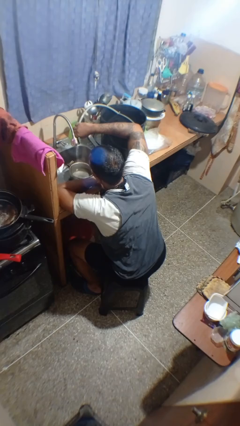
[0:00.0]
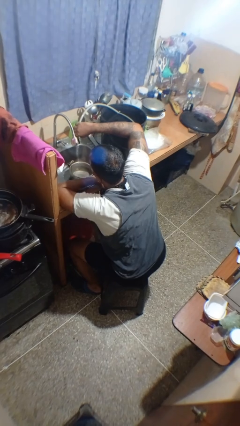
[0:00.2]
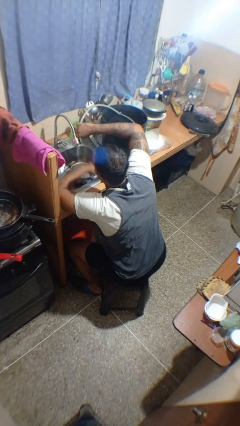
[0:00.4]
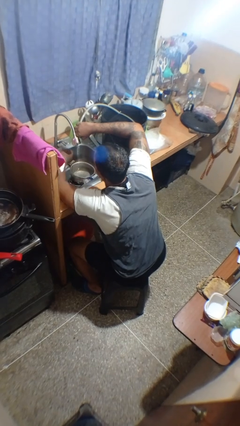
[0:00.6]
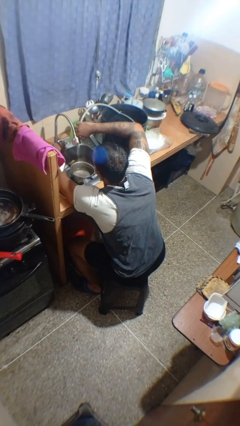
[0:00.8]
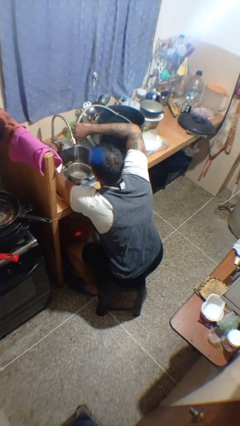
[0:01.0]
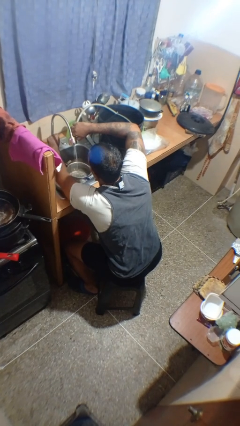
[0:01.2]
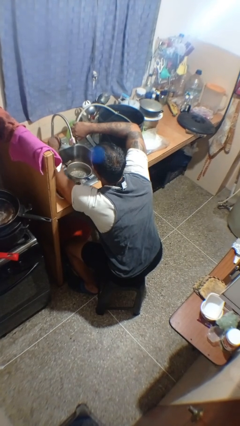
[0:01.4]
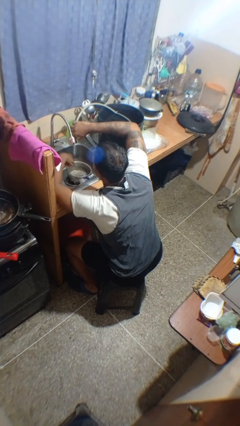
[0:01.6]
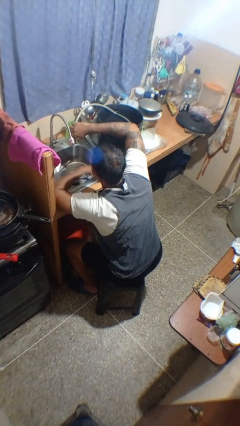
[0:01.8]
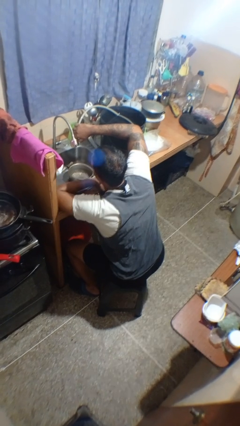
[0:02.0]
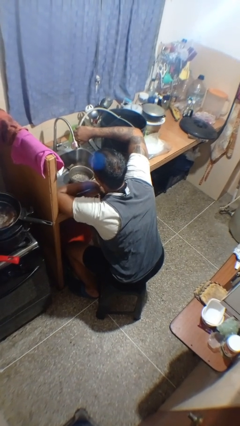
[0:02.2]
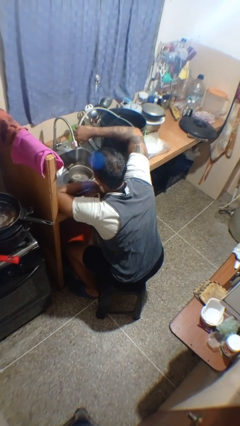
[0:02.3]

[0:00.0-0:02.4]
person turns off faucet

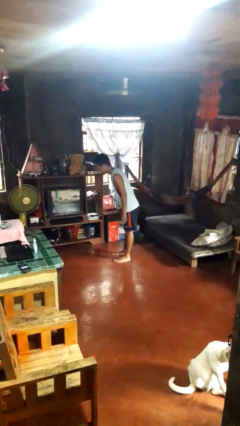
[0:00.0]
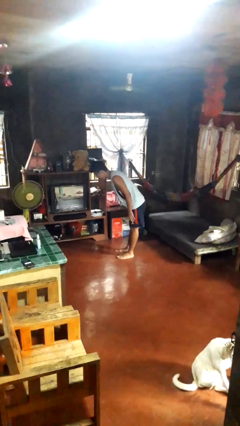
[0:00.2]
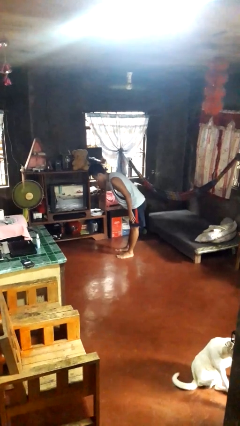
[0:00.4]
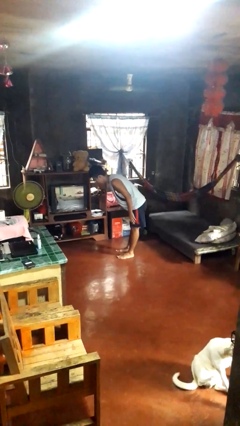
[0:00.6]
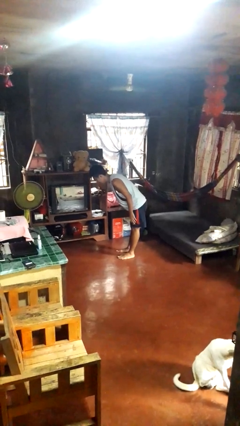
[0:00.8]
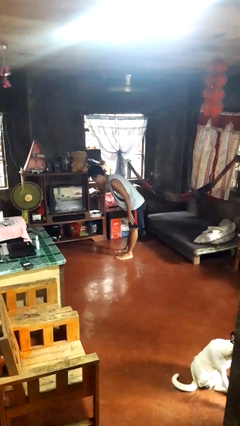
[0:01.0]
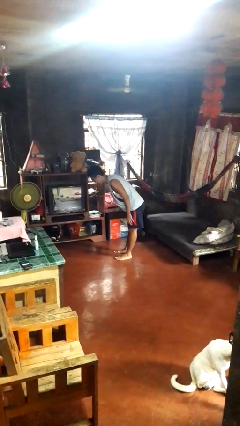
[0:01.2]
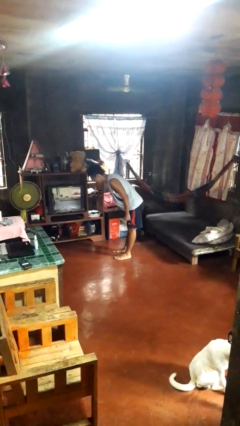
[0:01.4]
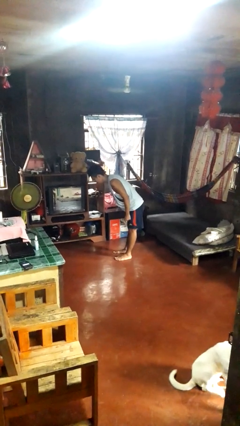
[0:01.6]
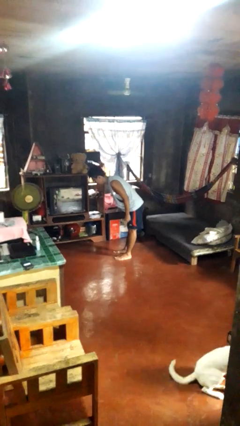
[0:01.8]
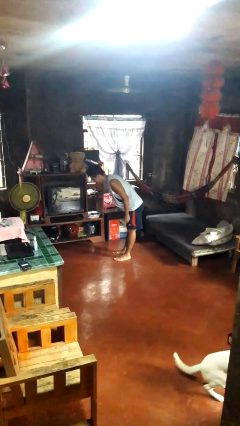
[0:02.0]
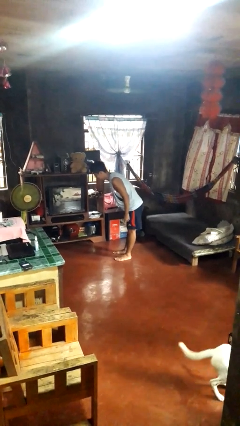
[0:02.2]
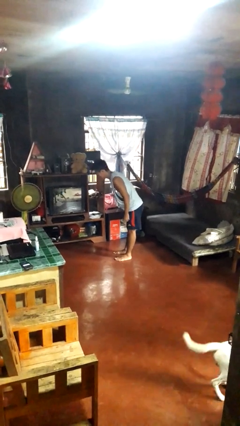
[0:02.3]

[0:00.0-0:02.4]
person bows

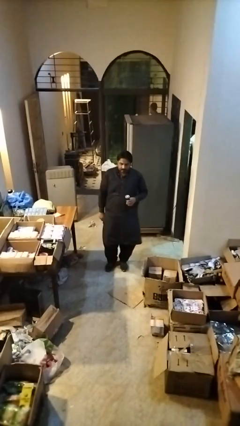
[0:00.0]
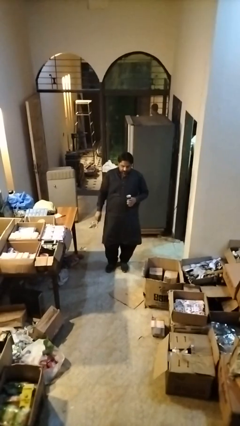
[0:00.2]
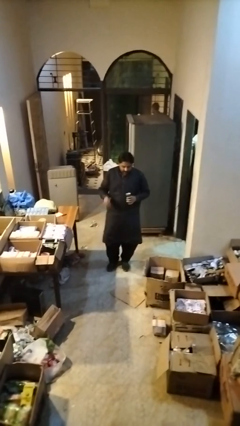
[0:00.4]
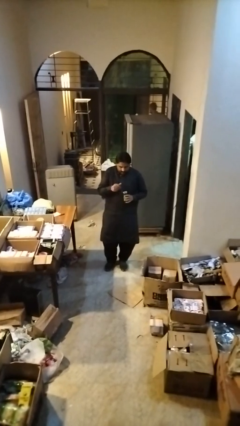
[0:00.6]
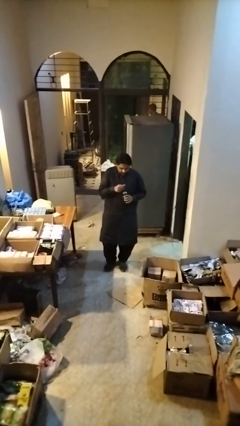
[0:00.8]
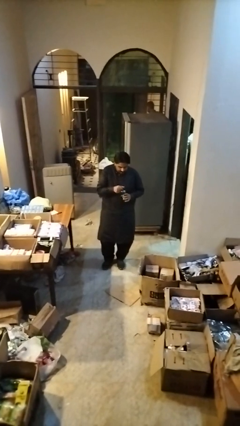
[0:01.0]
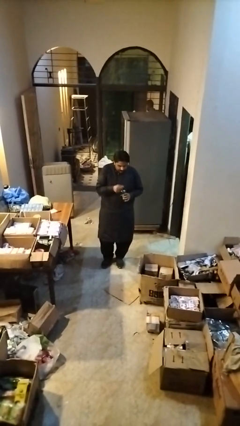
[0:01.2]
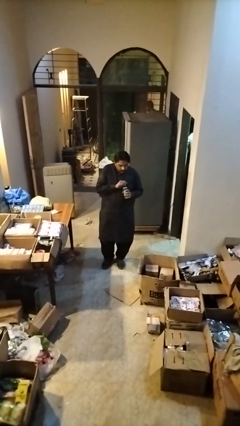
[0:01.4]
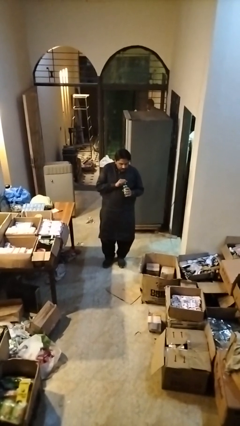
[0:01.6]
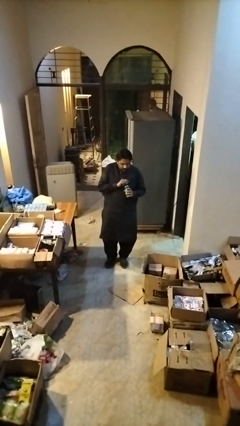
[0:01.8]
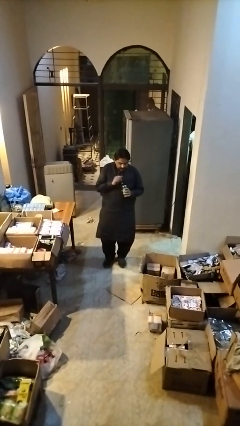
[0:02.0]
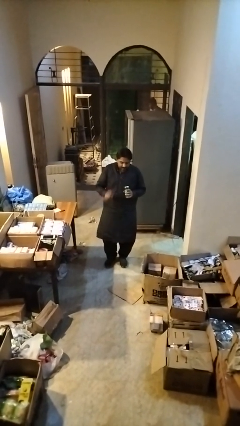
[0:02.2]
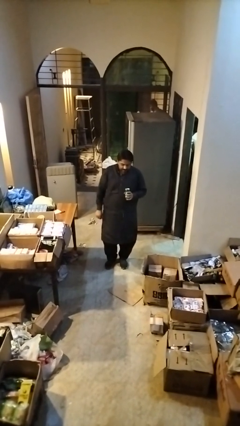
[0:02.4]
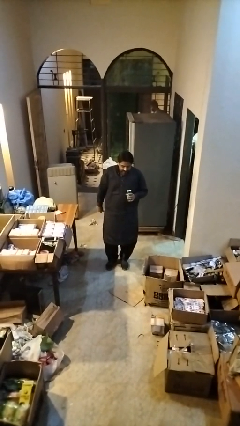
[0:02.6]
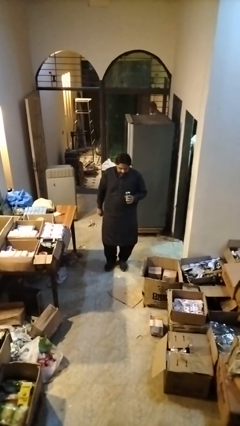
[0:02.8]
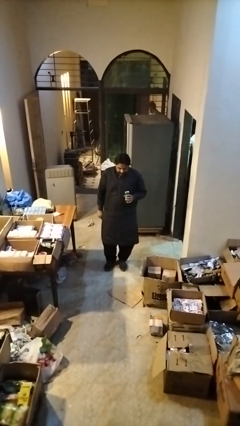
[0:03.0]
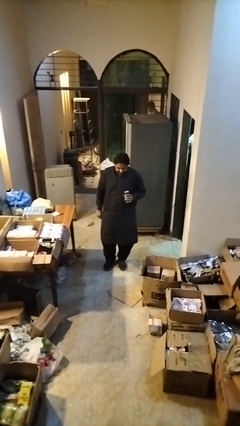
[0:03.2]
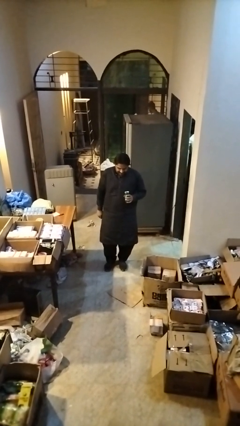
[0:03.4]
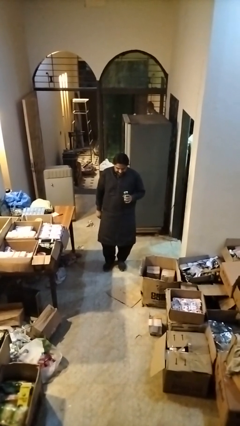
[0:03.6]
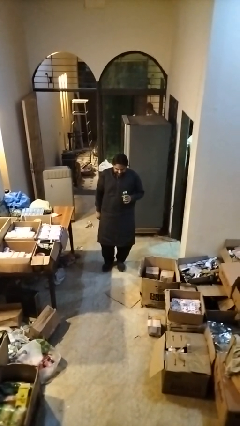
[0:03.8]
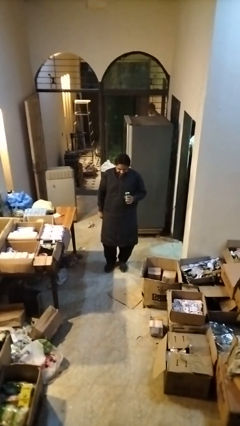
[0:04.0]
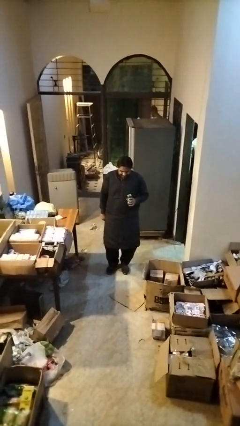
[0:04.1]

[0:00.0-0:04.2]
person opens can with can opener

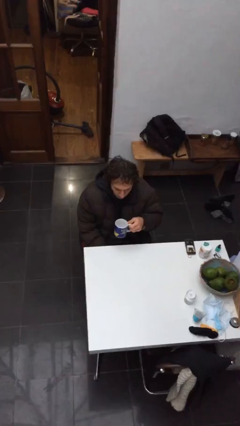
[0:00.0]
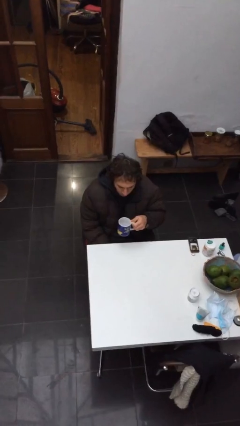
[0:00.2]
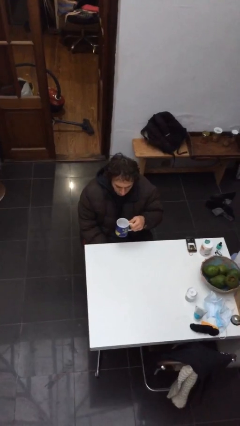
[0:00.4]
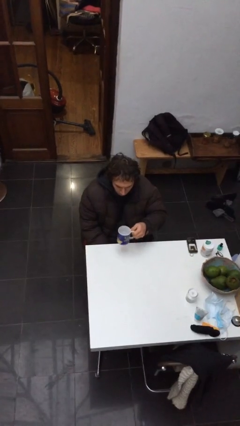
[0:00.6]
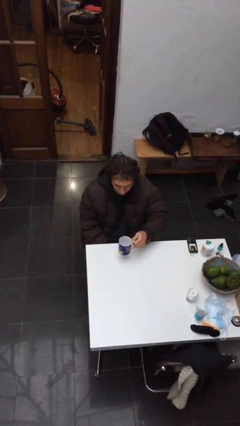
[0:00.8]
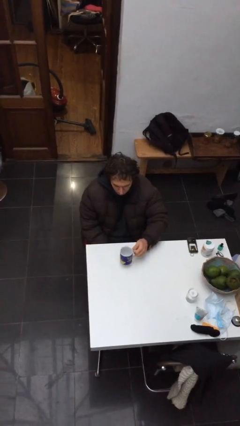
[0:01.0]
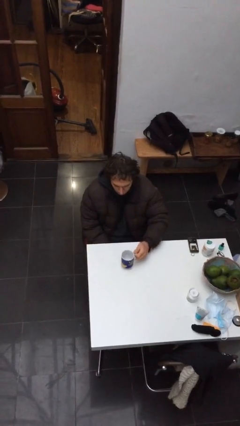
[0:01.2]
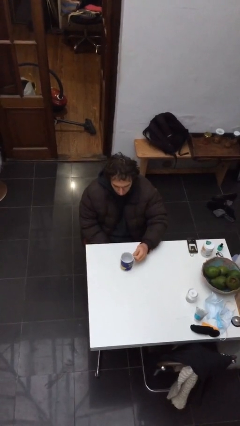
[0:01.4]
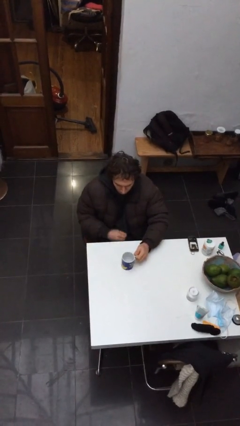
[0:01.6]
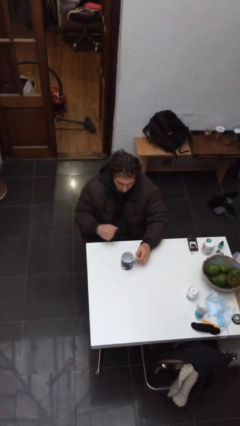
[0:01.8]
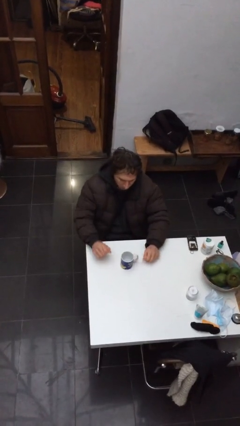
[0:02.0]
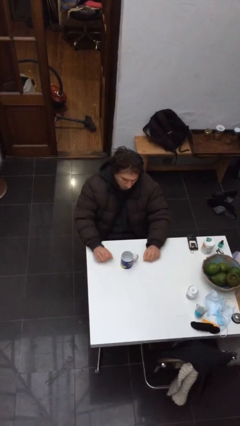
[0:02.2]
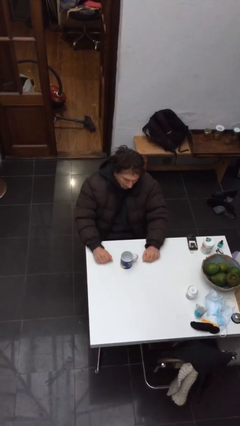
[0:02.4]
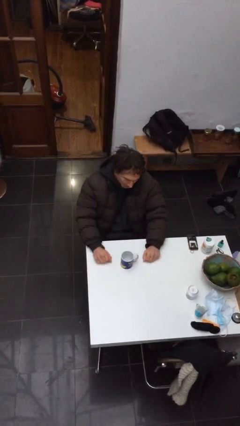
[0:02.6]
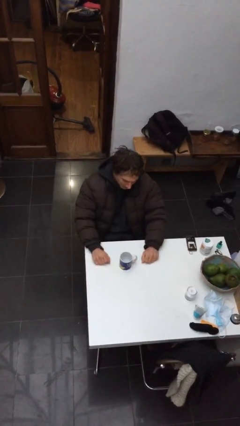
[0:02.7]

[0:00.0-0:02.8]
person puts down object on table

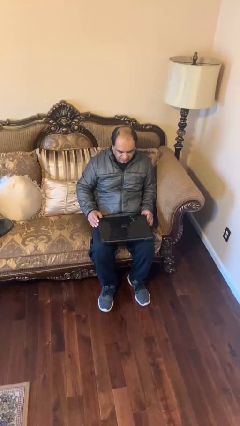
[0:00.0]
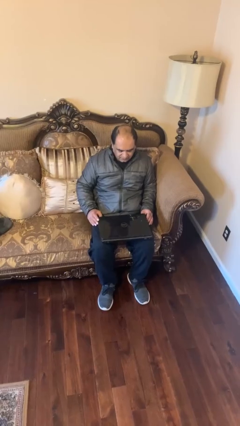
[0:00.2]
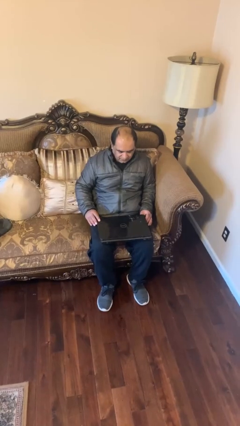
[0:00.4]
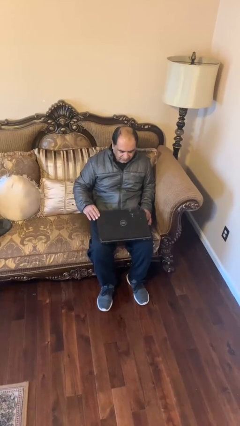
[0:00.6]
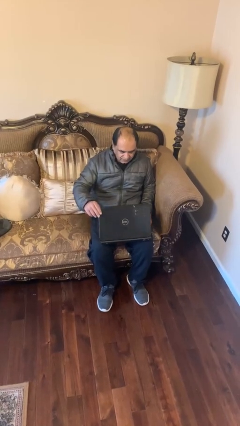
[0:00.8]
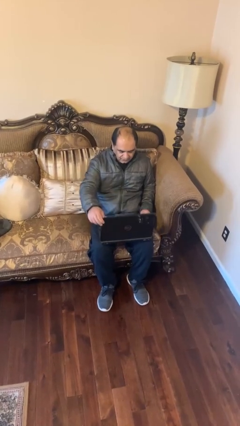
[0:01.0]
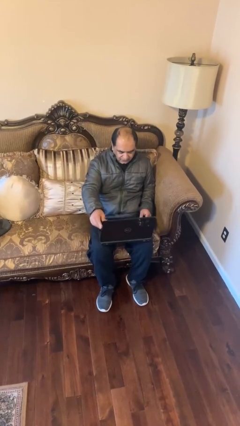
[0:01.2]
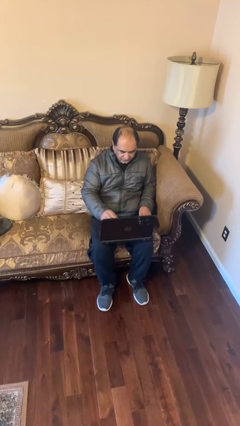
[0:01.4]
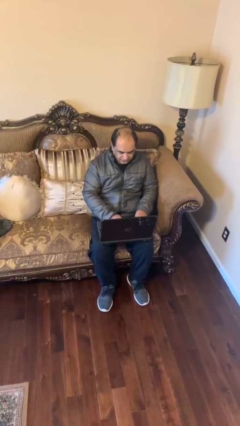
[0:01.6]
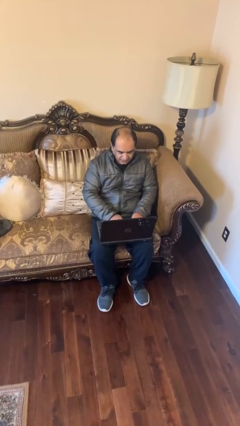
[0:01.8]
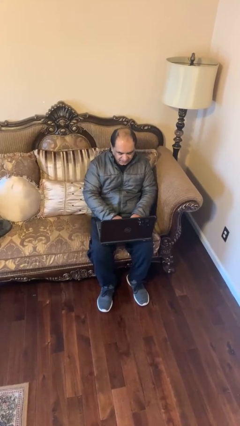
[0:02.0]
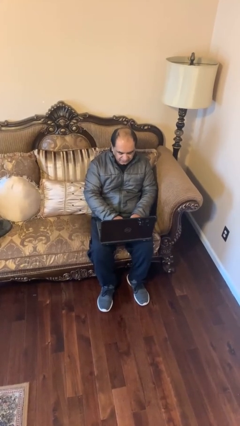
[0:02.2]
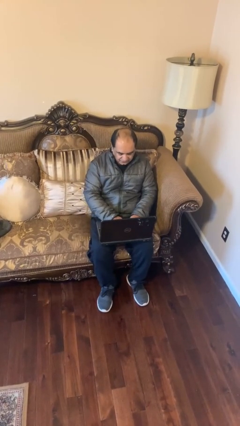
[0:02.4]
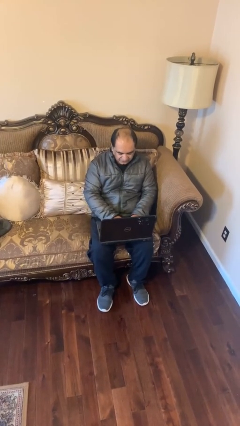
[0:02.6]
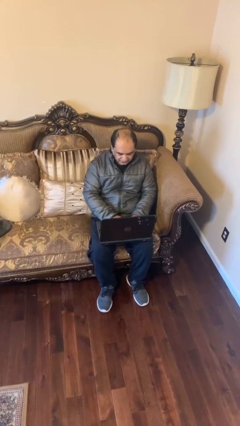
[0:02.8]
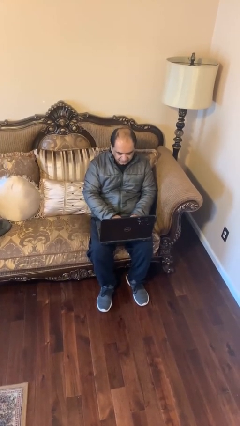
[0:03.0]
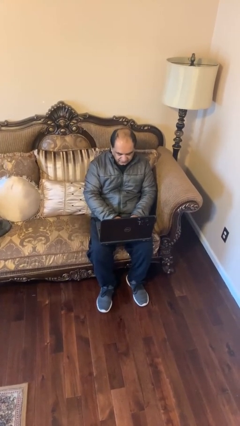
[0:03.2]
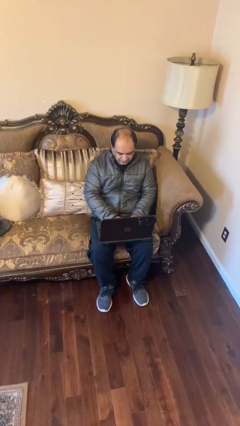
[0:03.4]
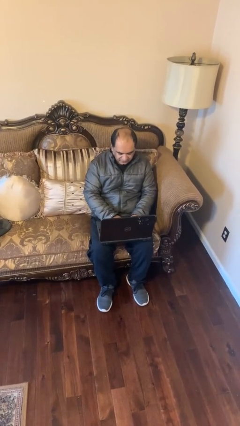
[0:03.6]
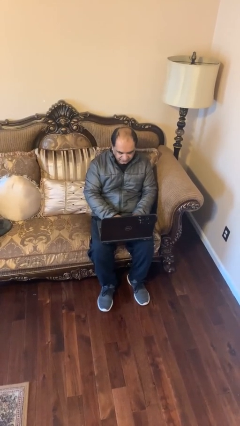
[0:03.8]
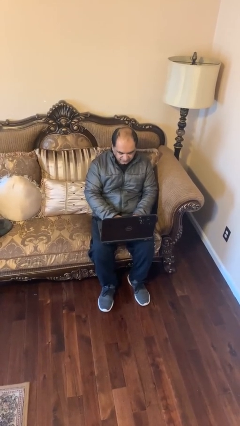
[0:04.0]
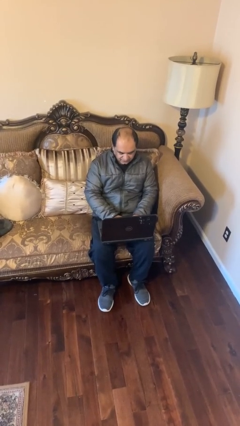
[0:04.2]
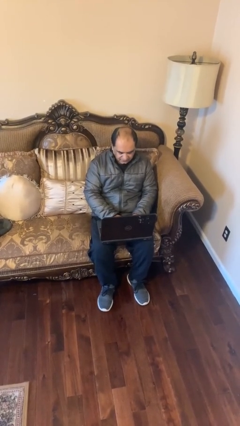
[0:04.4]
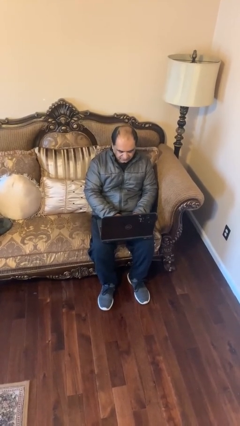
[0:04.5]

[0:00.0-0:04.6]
person interacts with laptop

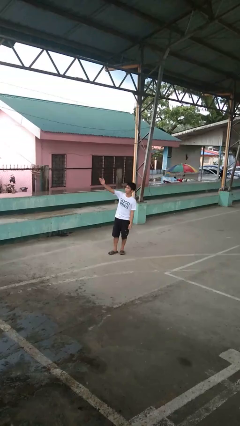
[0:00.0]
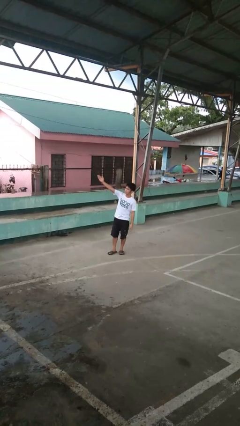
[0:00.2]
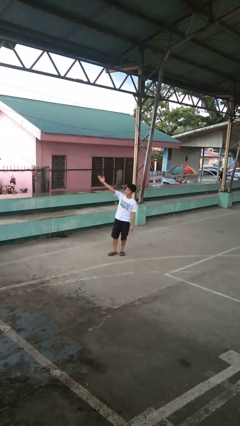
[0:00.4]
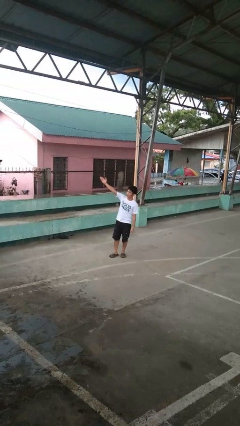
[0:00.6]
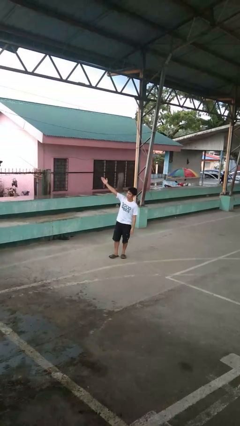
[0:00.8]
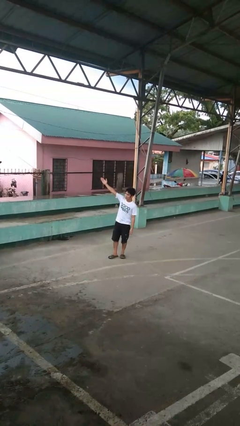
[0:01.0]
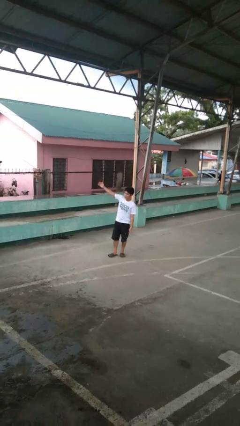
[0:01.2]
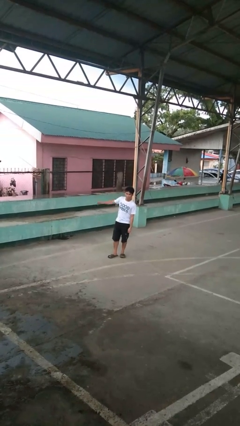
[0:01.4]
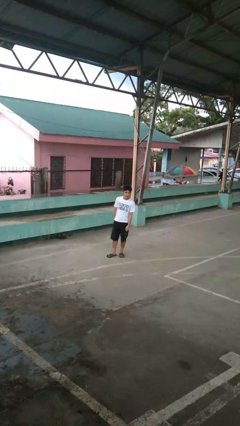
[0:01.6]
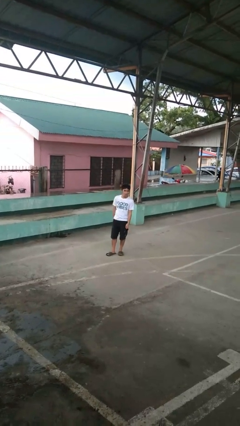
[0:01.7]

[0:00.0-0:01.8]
person gestures blow kiss
